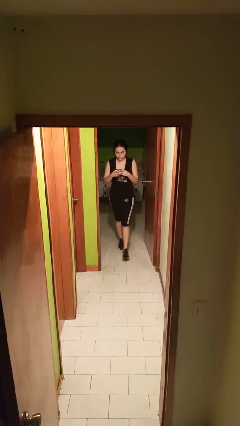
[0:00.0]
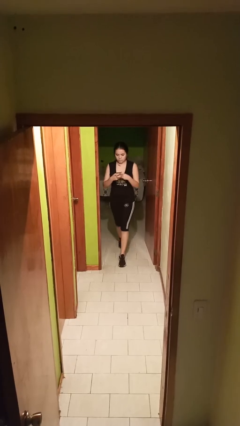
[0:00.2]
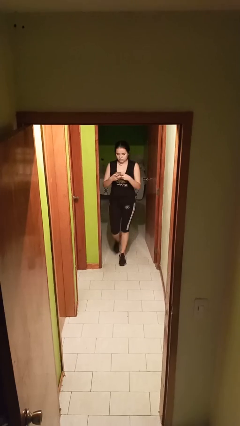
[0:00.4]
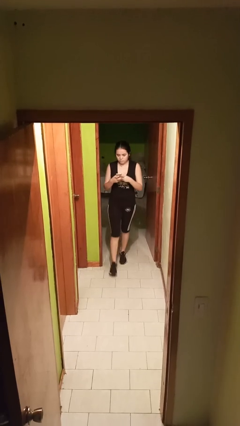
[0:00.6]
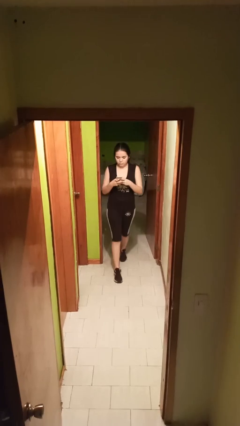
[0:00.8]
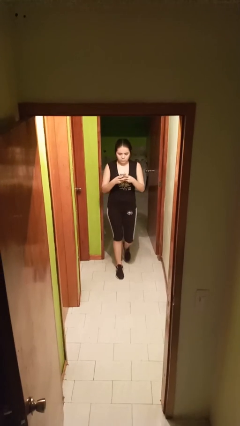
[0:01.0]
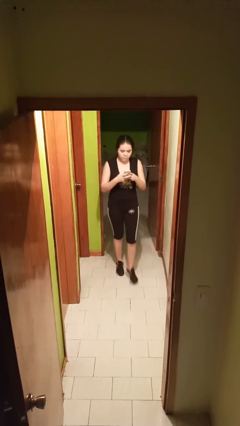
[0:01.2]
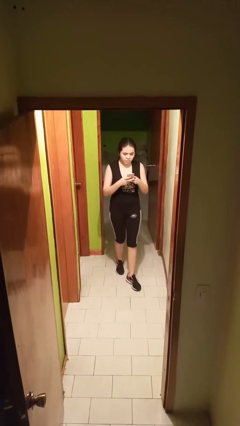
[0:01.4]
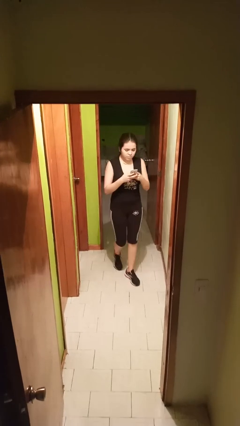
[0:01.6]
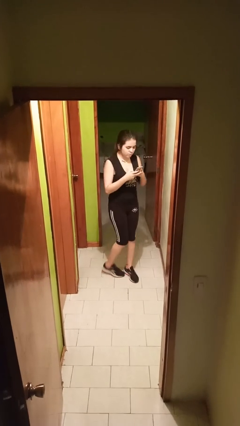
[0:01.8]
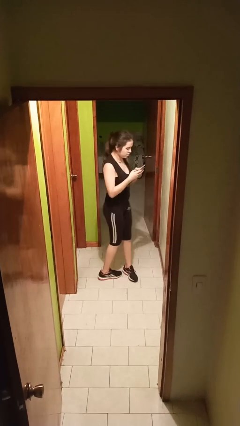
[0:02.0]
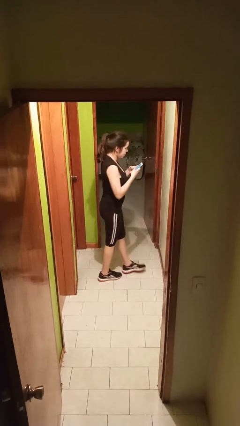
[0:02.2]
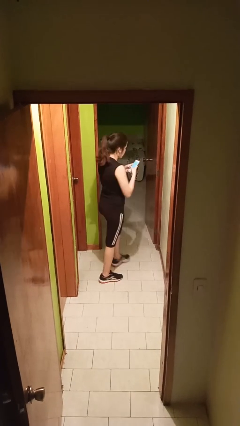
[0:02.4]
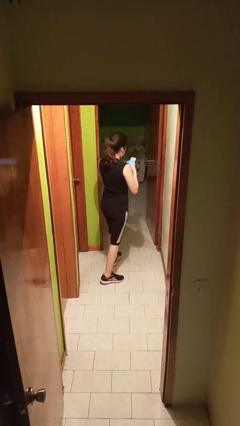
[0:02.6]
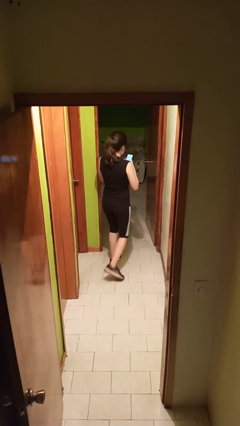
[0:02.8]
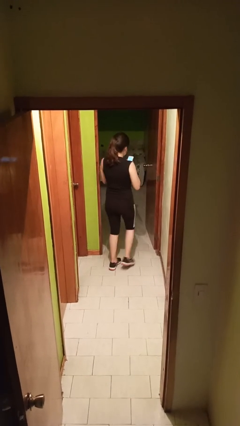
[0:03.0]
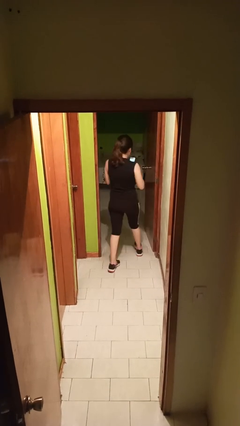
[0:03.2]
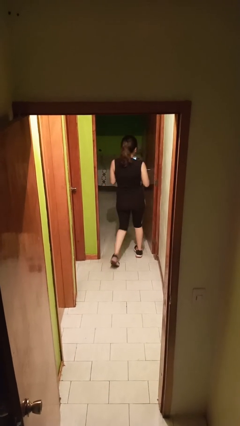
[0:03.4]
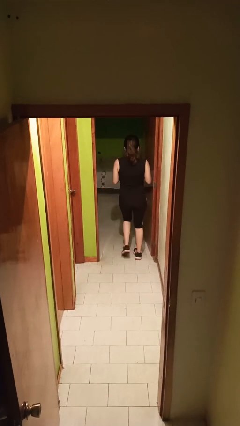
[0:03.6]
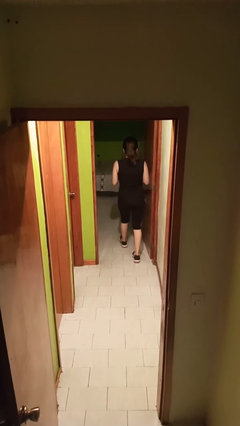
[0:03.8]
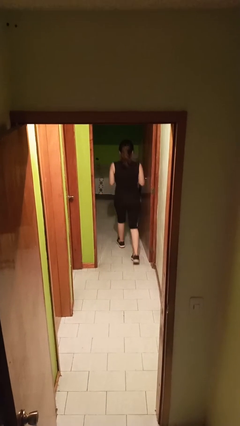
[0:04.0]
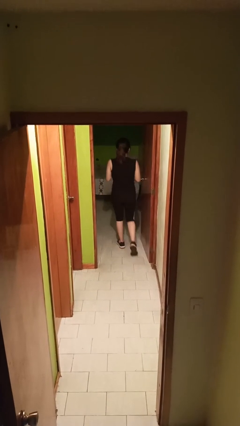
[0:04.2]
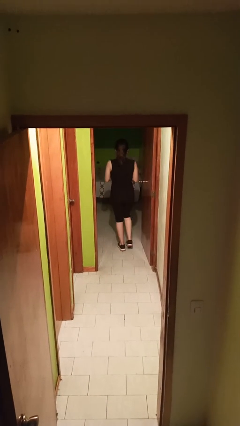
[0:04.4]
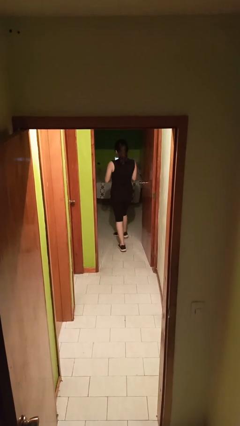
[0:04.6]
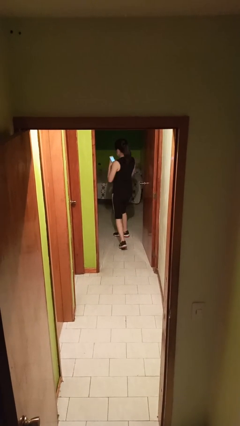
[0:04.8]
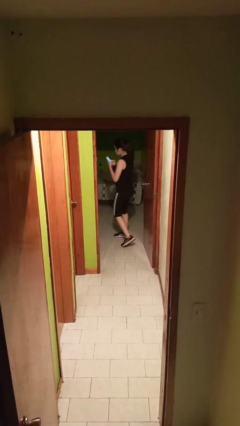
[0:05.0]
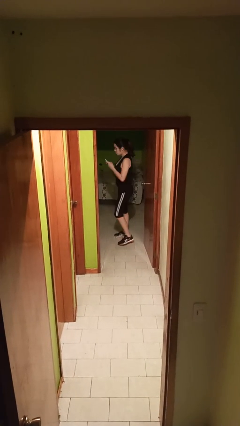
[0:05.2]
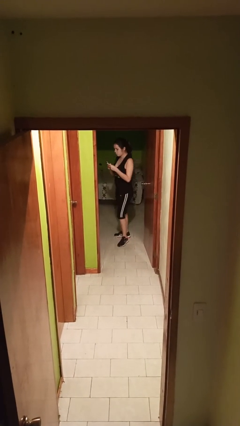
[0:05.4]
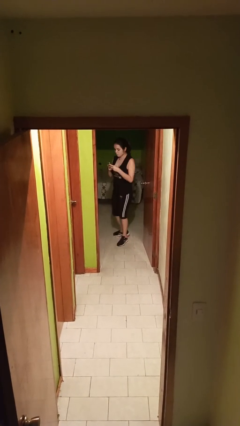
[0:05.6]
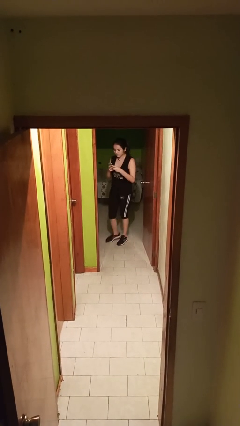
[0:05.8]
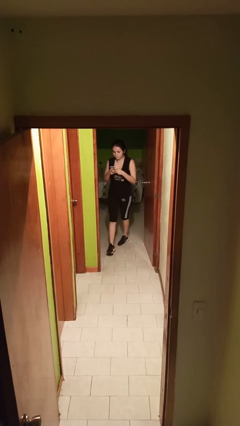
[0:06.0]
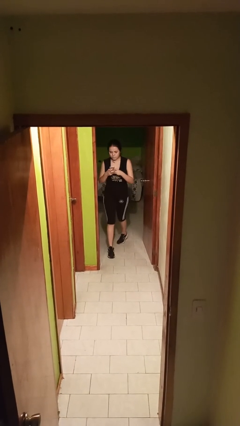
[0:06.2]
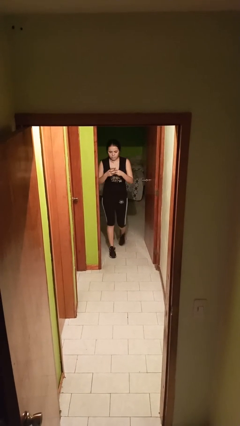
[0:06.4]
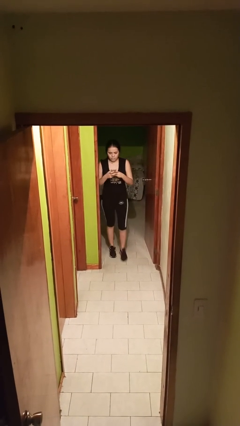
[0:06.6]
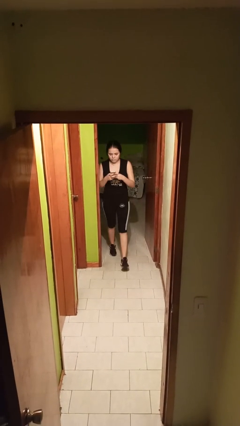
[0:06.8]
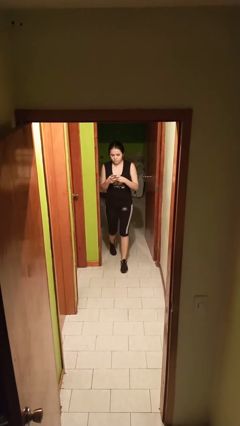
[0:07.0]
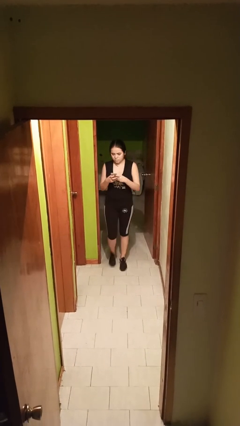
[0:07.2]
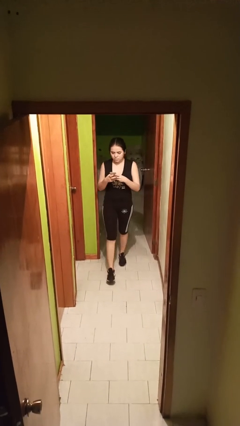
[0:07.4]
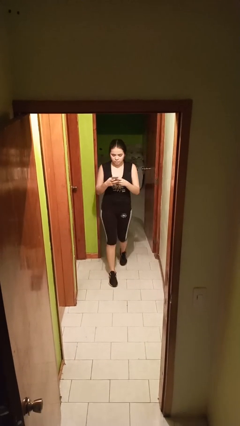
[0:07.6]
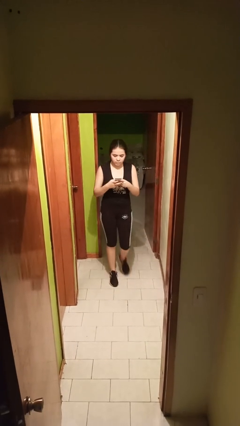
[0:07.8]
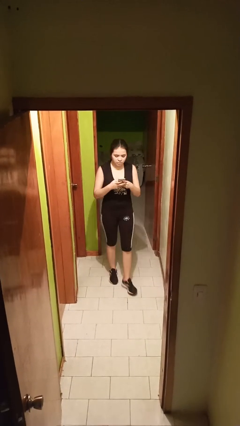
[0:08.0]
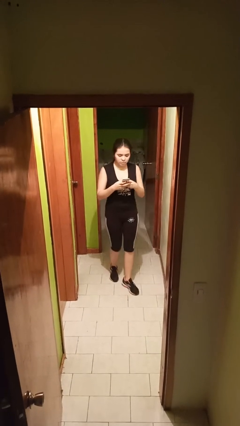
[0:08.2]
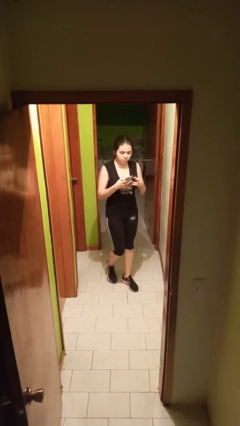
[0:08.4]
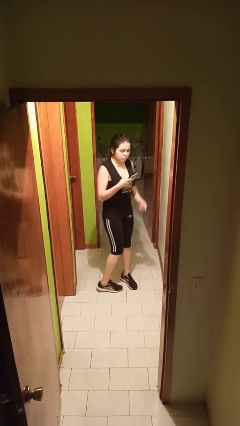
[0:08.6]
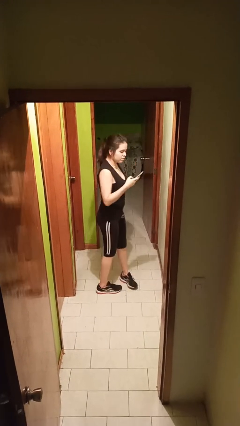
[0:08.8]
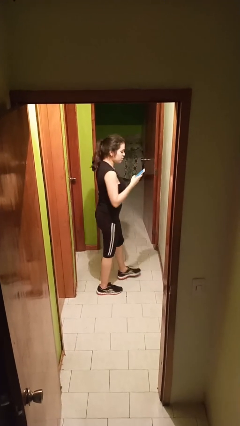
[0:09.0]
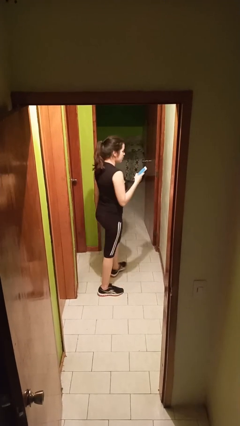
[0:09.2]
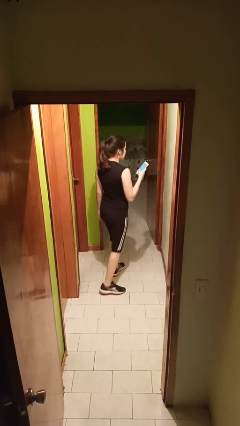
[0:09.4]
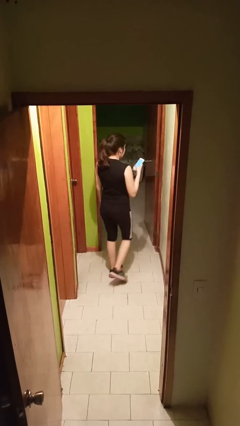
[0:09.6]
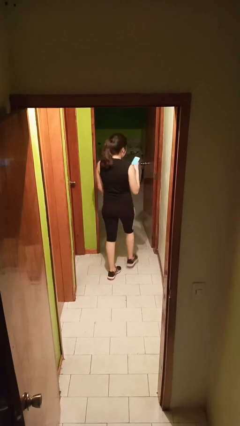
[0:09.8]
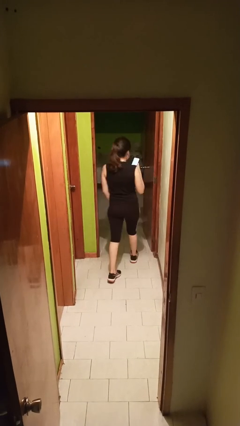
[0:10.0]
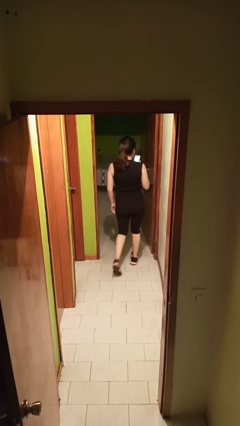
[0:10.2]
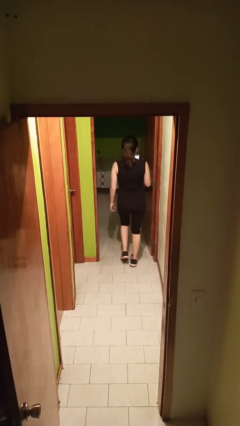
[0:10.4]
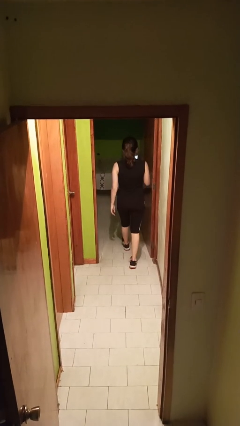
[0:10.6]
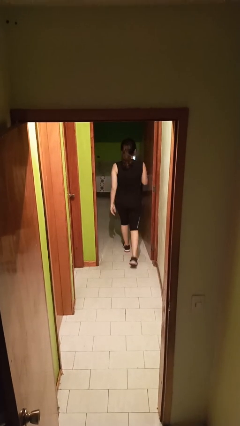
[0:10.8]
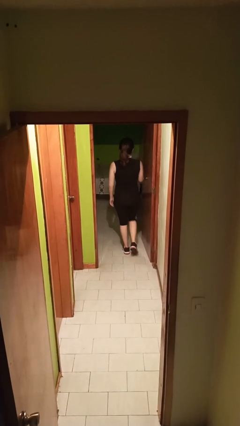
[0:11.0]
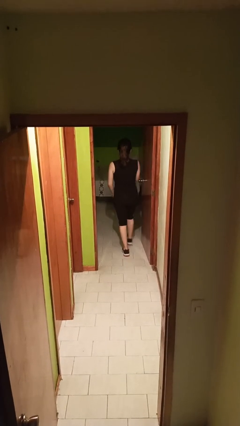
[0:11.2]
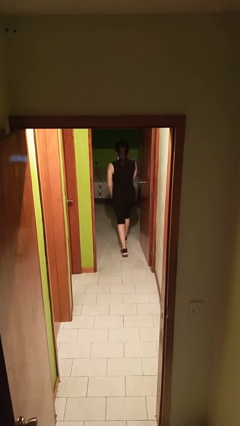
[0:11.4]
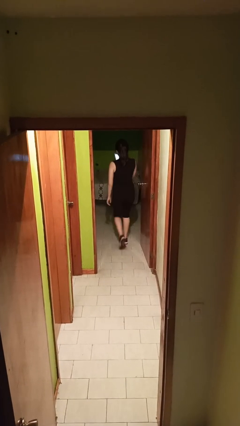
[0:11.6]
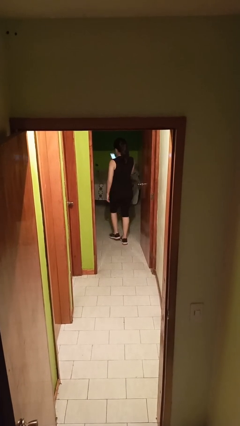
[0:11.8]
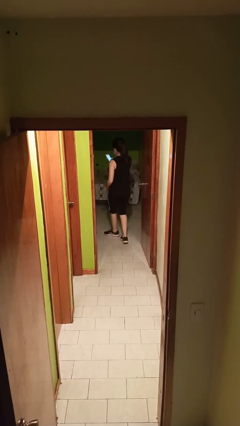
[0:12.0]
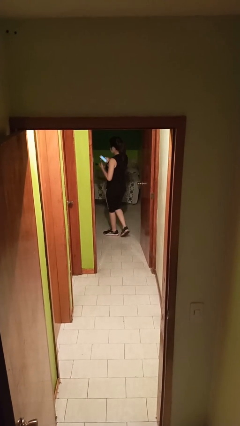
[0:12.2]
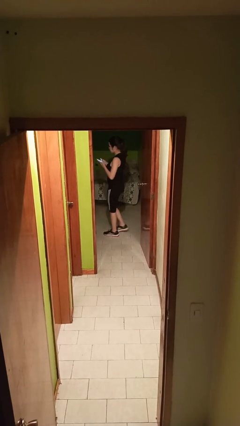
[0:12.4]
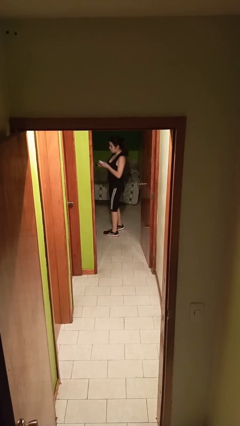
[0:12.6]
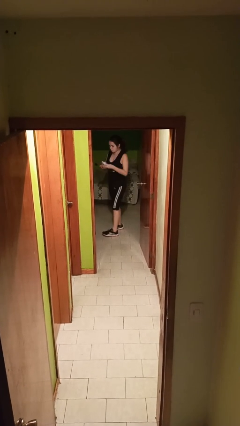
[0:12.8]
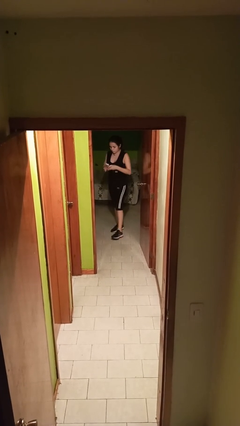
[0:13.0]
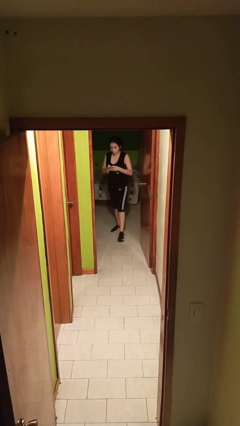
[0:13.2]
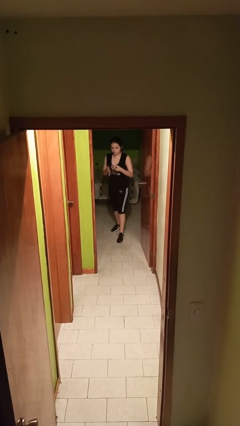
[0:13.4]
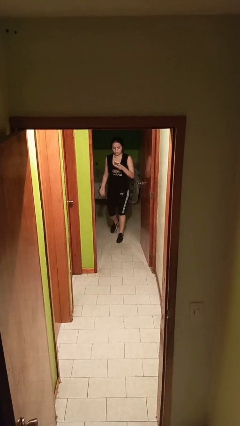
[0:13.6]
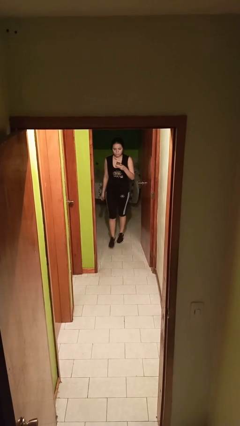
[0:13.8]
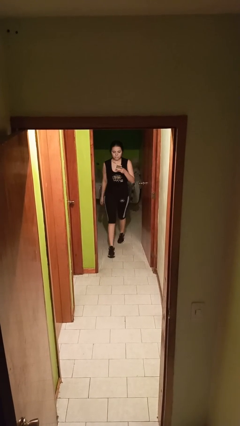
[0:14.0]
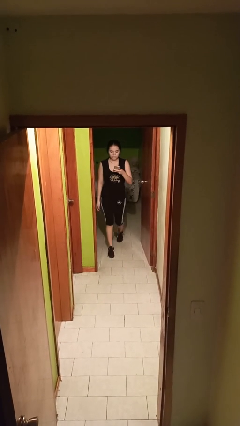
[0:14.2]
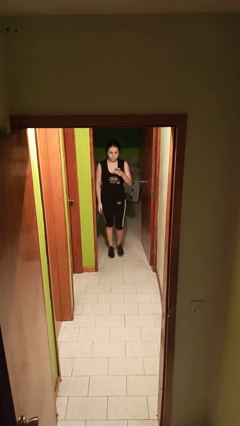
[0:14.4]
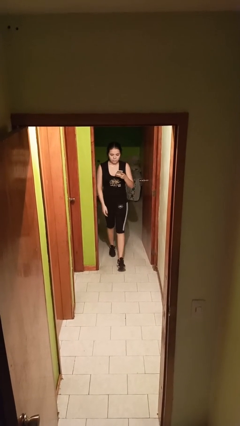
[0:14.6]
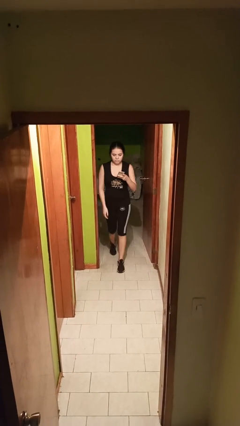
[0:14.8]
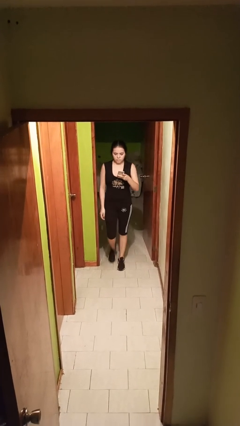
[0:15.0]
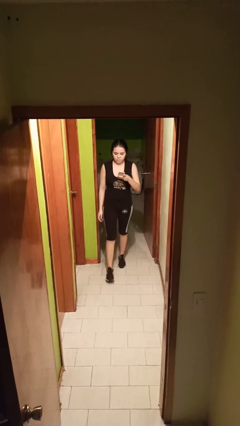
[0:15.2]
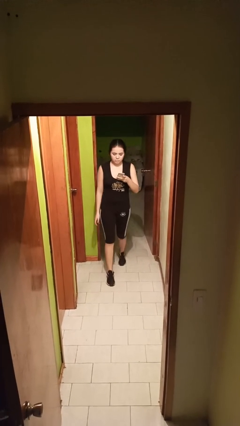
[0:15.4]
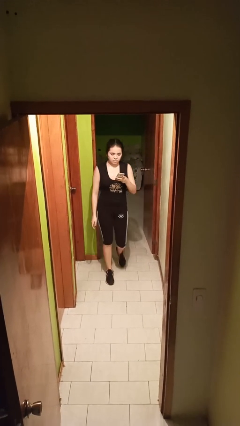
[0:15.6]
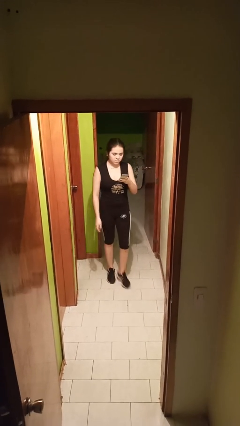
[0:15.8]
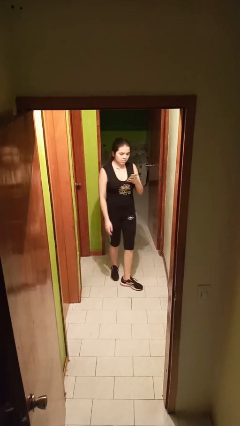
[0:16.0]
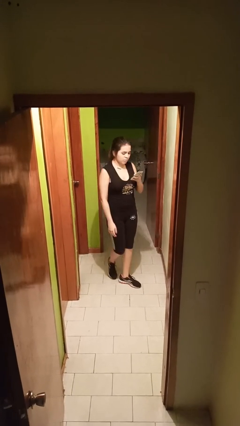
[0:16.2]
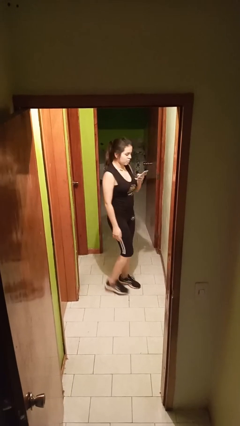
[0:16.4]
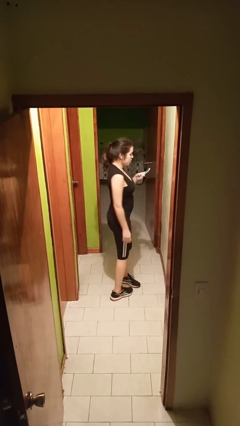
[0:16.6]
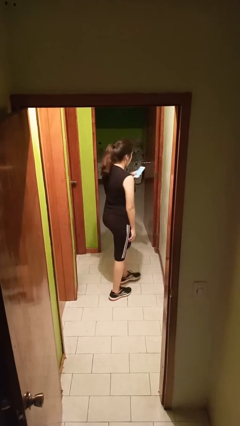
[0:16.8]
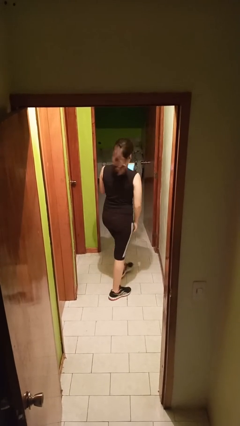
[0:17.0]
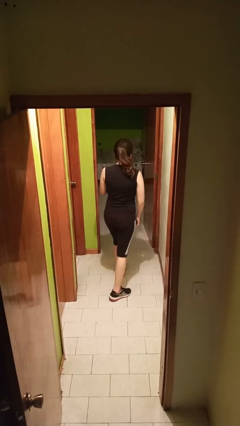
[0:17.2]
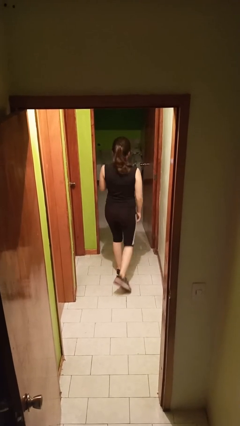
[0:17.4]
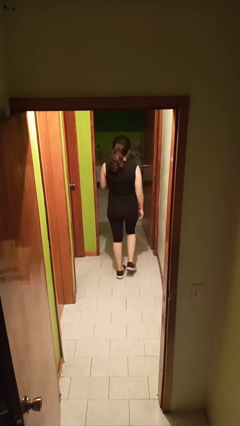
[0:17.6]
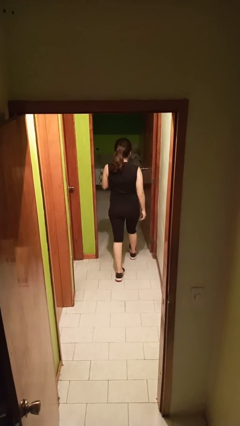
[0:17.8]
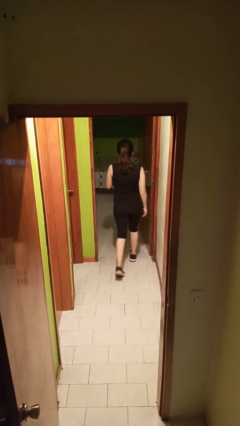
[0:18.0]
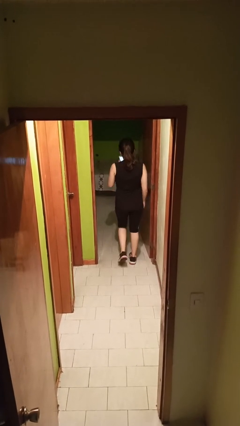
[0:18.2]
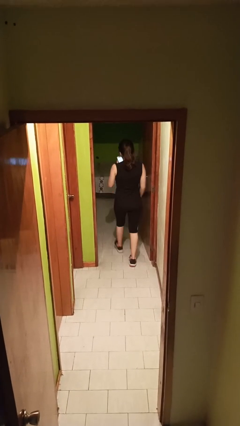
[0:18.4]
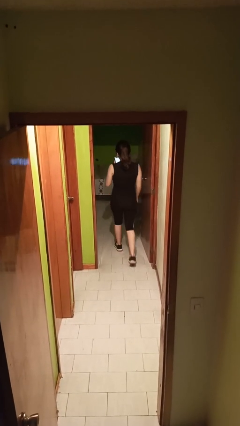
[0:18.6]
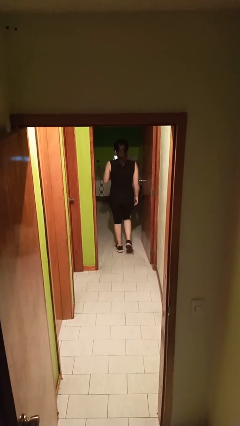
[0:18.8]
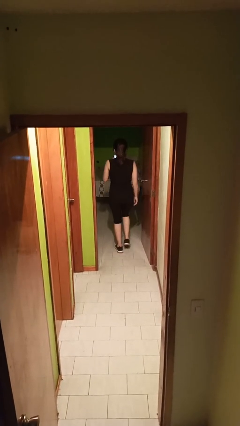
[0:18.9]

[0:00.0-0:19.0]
person texts on phone
